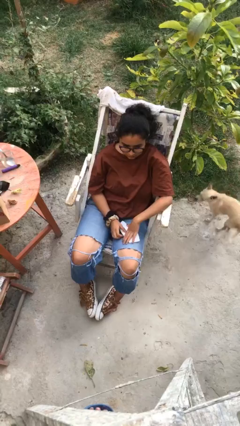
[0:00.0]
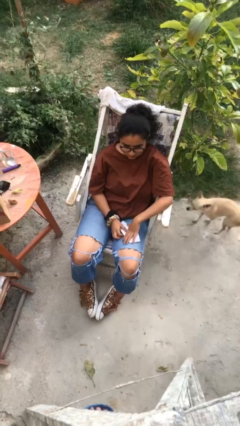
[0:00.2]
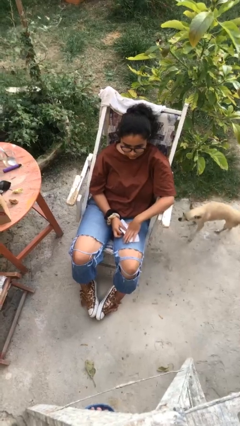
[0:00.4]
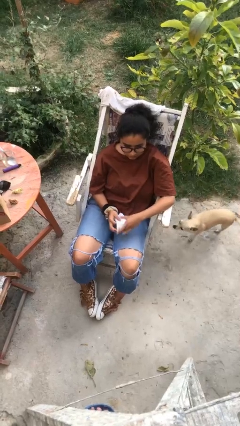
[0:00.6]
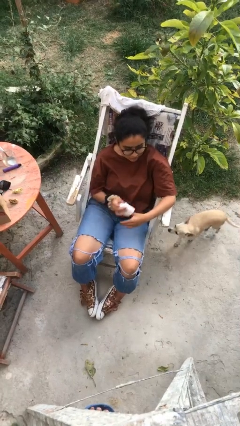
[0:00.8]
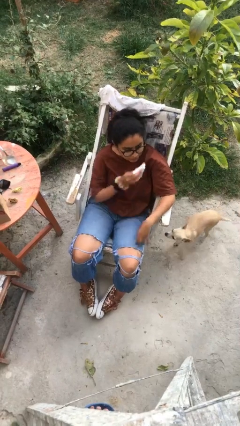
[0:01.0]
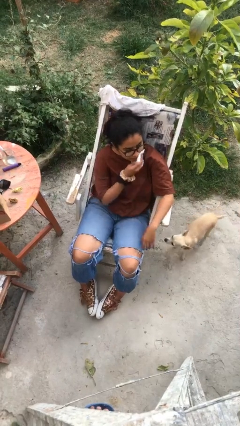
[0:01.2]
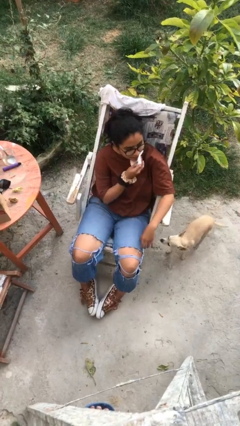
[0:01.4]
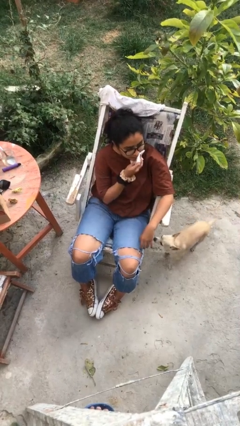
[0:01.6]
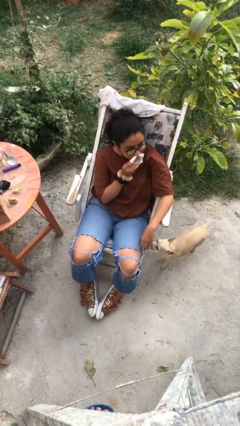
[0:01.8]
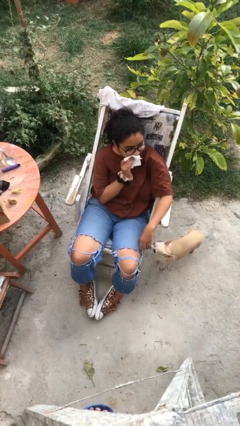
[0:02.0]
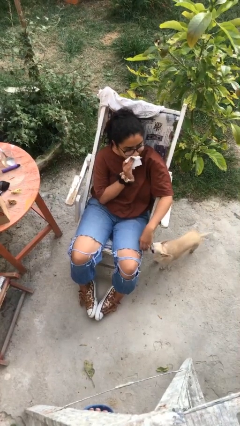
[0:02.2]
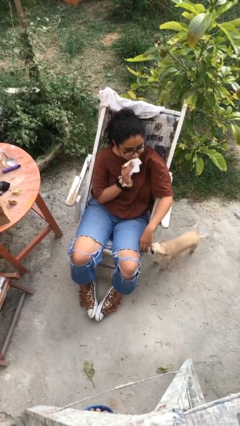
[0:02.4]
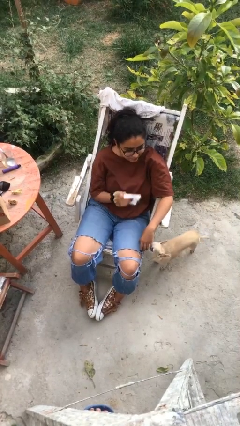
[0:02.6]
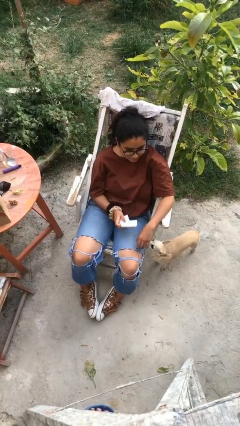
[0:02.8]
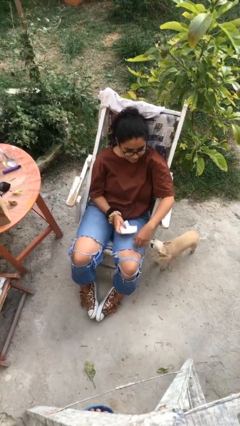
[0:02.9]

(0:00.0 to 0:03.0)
person wipes mouth with napkin

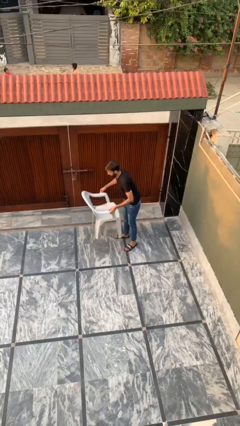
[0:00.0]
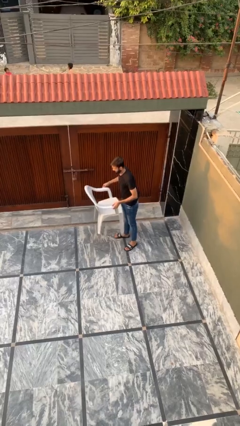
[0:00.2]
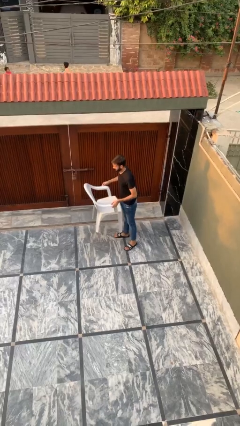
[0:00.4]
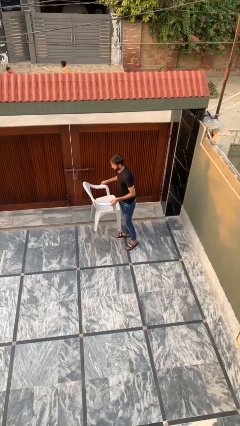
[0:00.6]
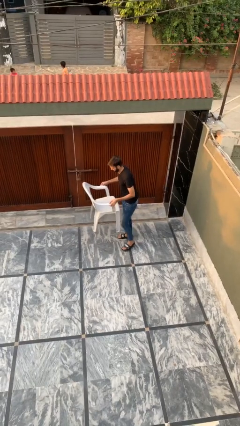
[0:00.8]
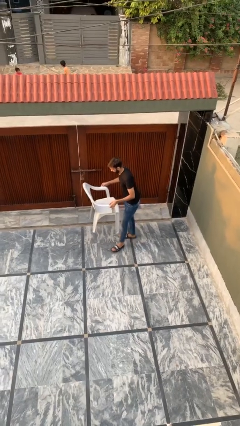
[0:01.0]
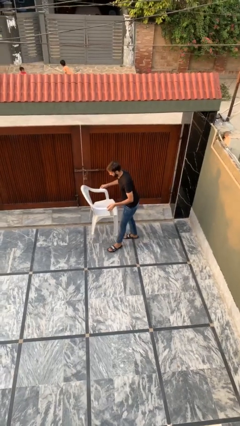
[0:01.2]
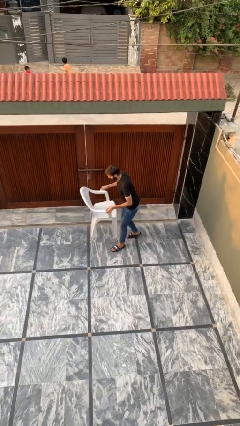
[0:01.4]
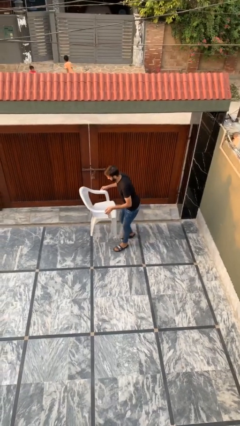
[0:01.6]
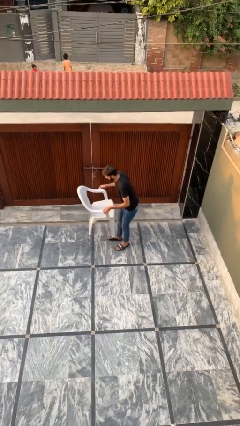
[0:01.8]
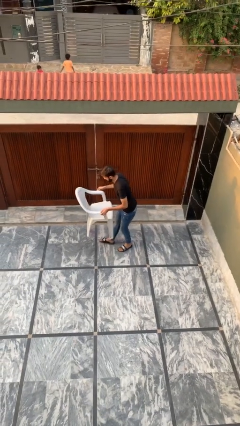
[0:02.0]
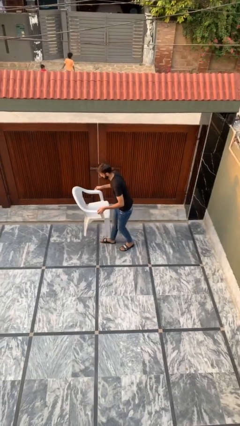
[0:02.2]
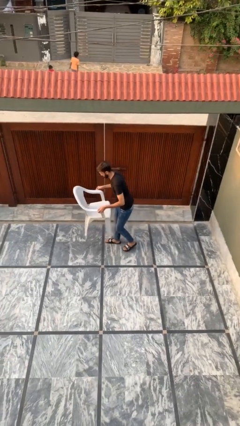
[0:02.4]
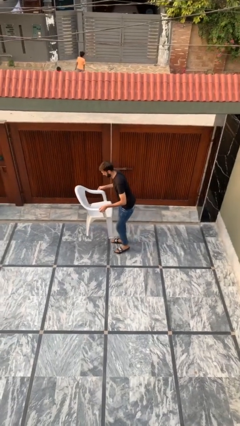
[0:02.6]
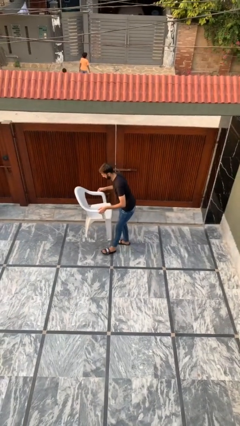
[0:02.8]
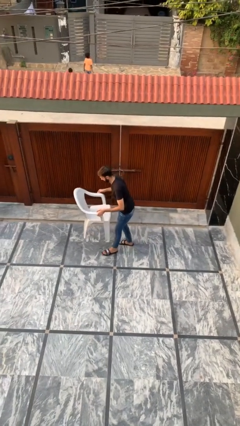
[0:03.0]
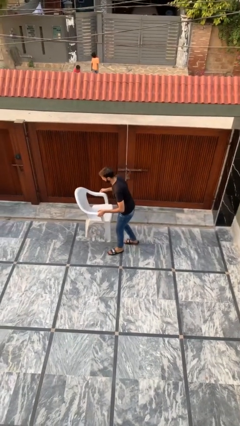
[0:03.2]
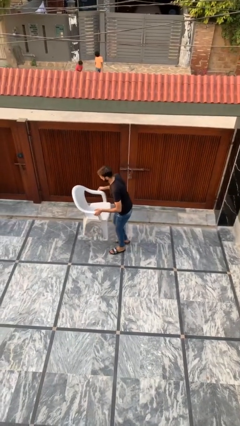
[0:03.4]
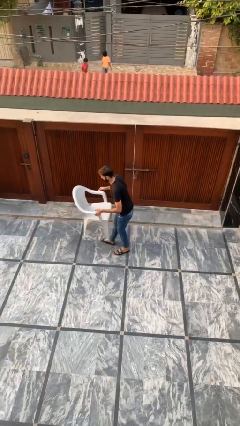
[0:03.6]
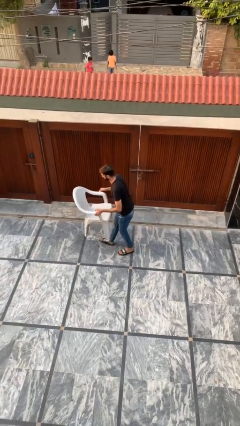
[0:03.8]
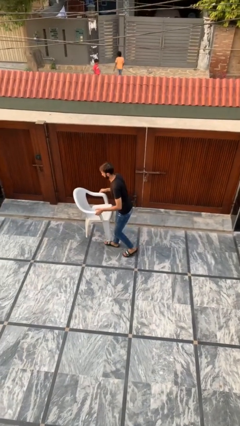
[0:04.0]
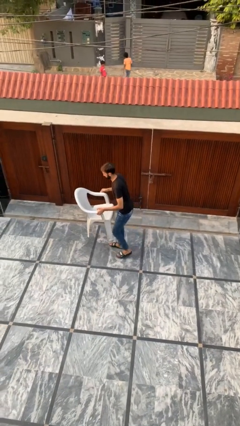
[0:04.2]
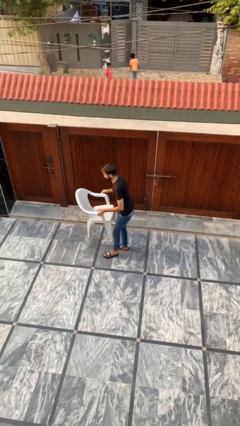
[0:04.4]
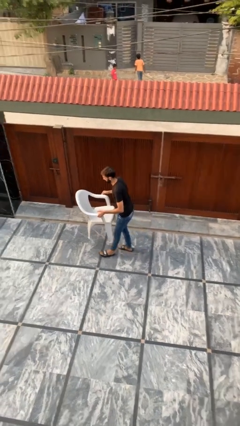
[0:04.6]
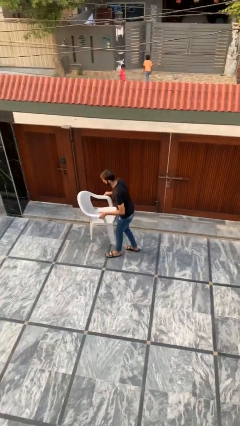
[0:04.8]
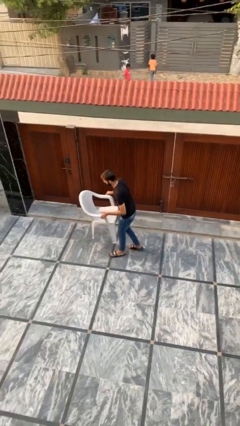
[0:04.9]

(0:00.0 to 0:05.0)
person carries heavy object

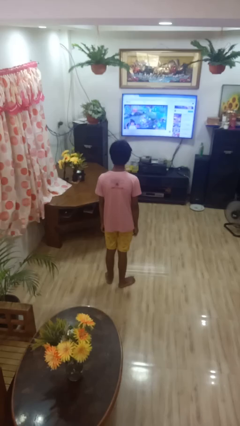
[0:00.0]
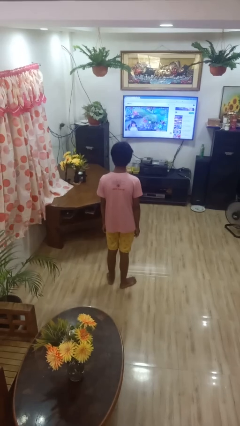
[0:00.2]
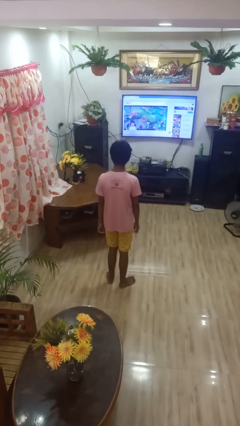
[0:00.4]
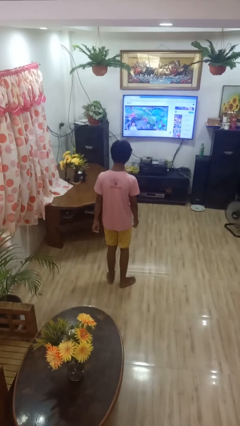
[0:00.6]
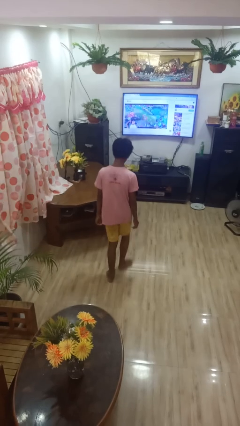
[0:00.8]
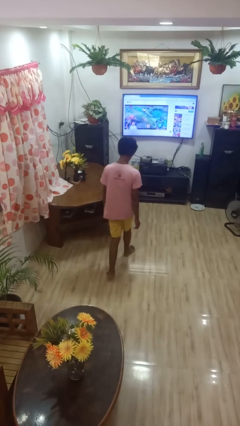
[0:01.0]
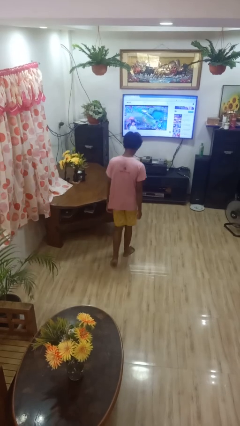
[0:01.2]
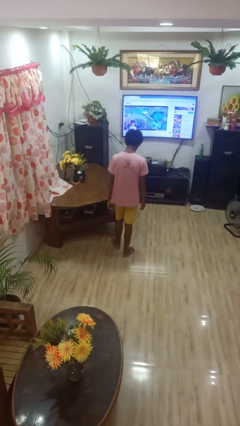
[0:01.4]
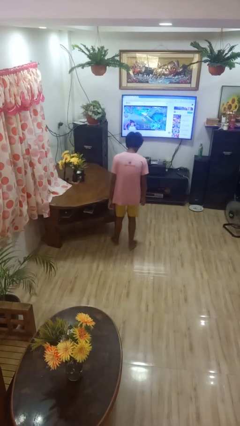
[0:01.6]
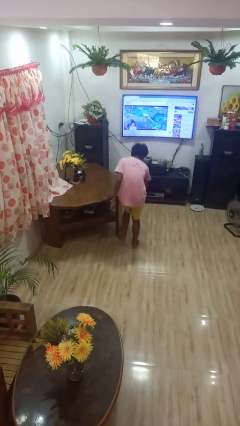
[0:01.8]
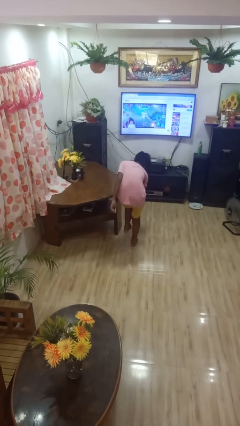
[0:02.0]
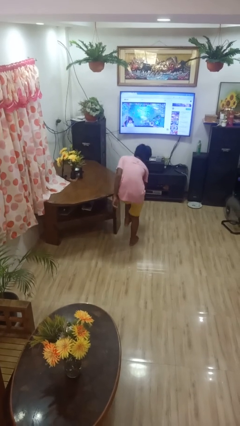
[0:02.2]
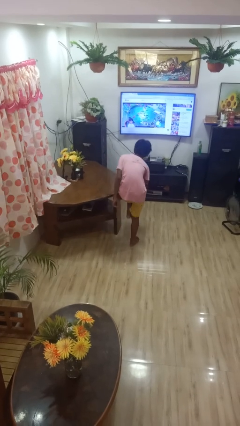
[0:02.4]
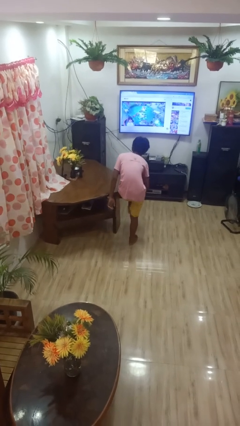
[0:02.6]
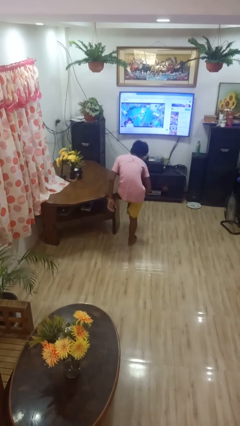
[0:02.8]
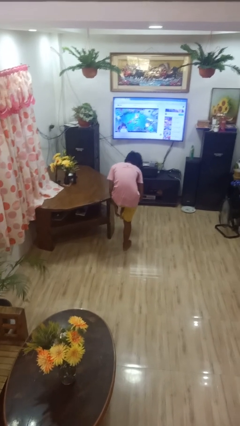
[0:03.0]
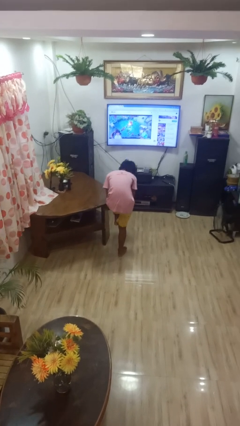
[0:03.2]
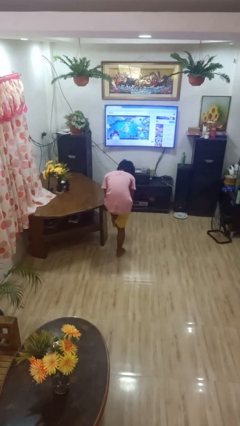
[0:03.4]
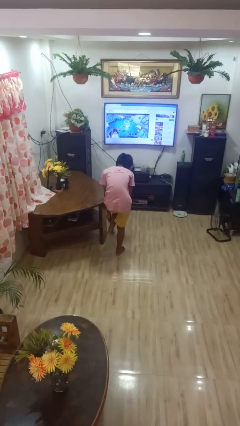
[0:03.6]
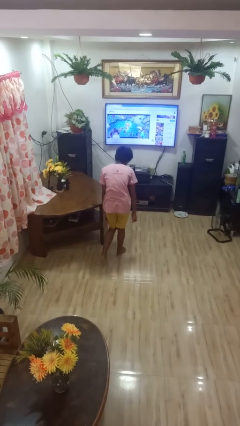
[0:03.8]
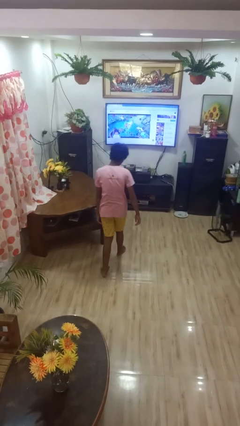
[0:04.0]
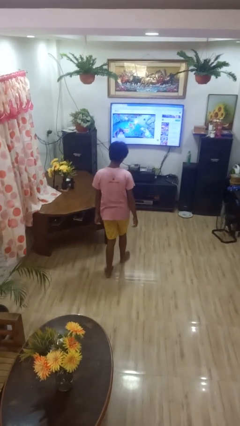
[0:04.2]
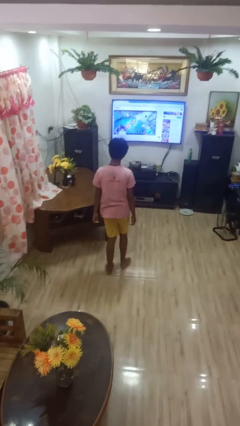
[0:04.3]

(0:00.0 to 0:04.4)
person stubs toe

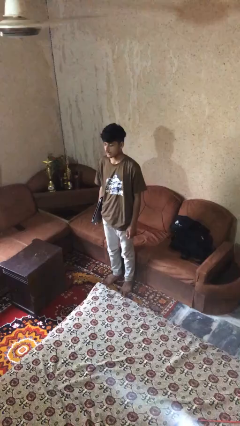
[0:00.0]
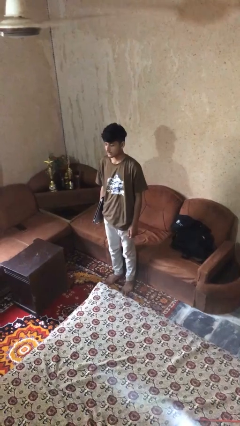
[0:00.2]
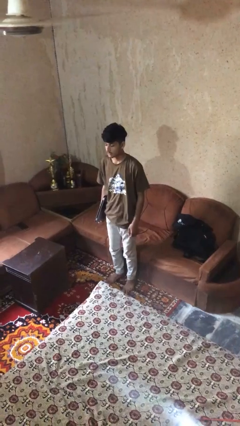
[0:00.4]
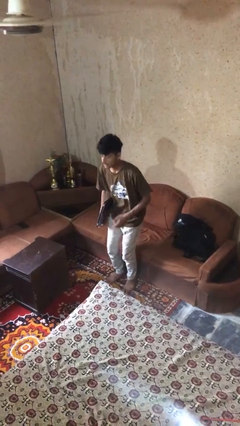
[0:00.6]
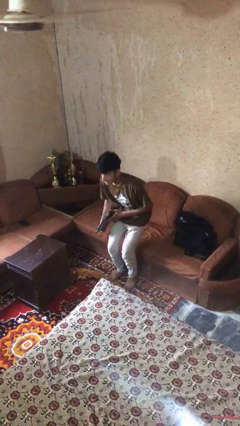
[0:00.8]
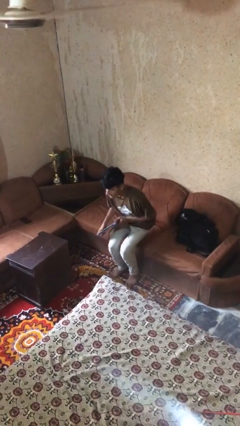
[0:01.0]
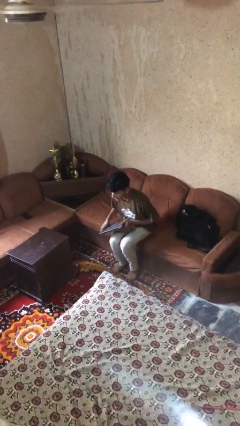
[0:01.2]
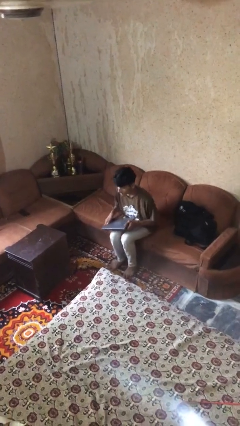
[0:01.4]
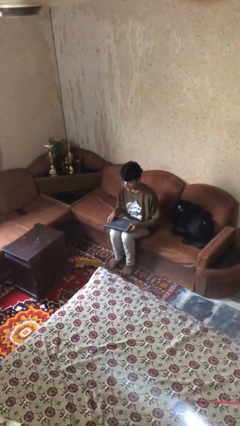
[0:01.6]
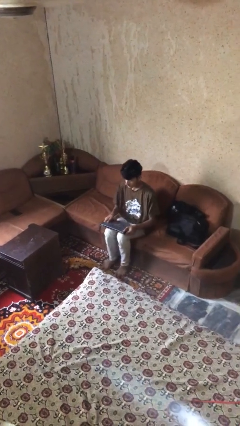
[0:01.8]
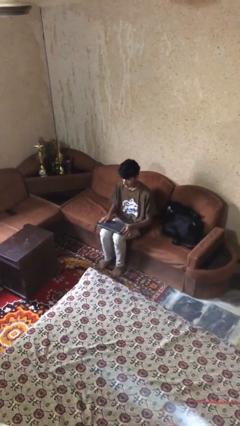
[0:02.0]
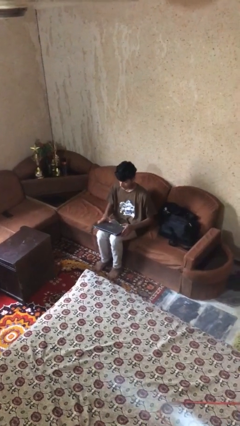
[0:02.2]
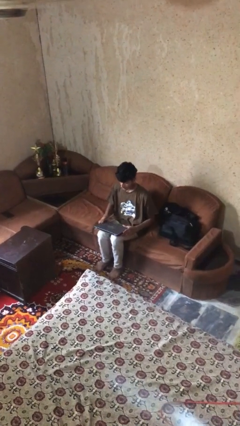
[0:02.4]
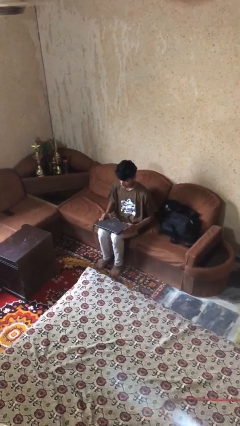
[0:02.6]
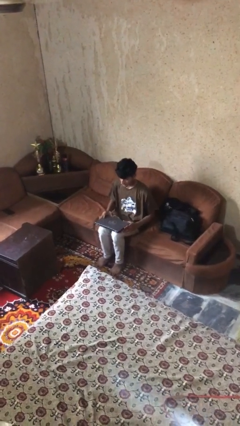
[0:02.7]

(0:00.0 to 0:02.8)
person sits down

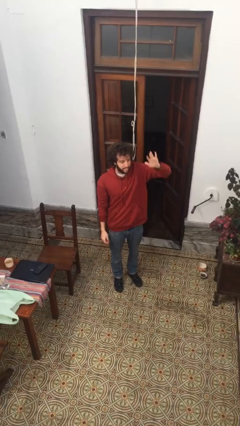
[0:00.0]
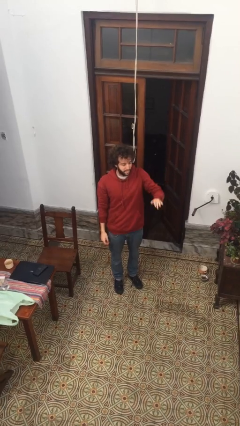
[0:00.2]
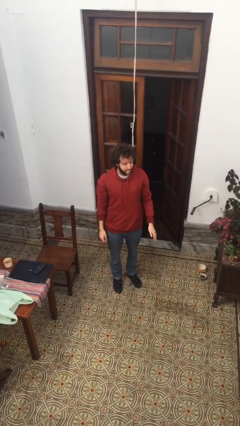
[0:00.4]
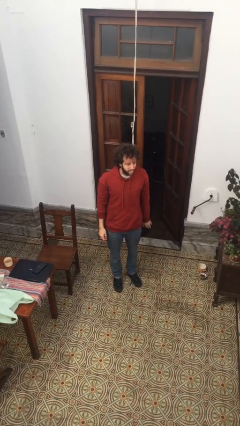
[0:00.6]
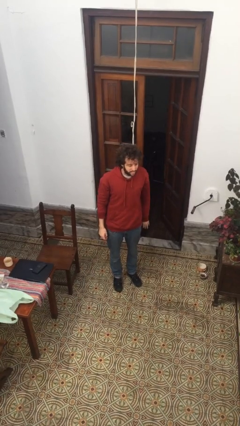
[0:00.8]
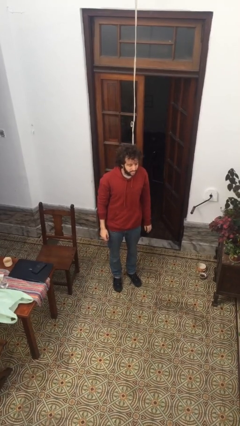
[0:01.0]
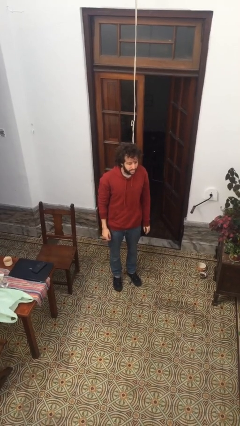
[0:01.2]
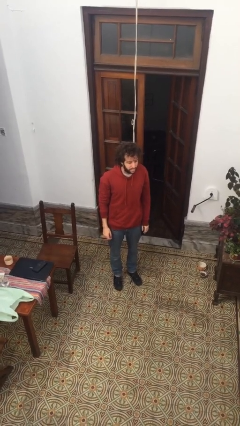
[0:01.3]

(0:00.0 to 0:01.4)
person gestures lower hand

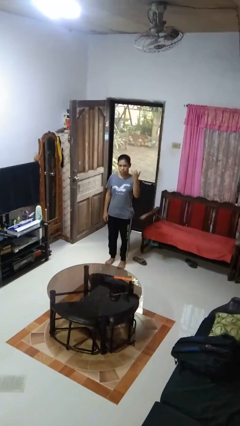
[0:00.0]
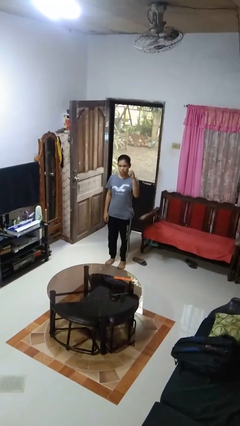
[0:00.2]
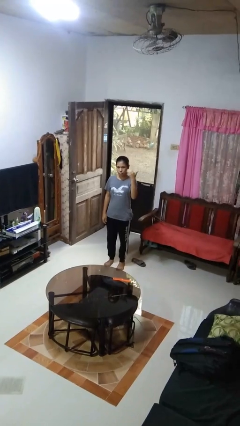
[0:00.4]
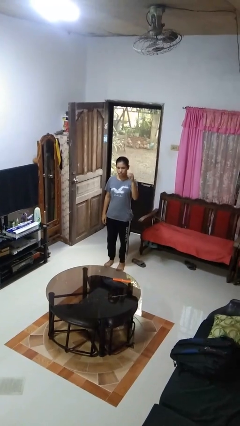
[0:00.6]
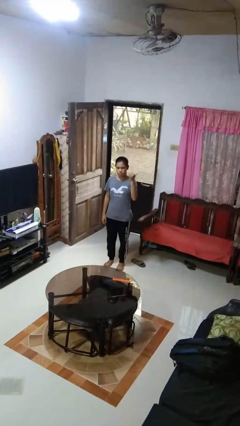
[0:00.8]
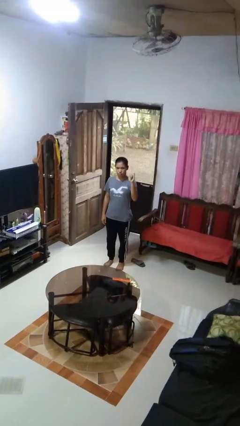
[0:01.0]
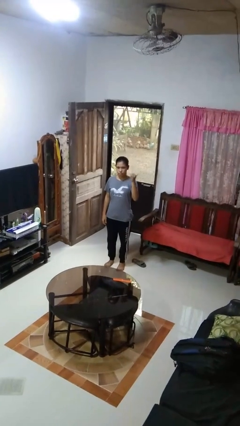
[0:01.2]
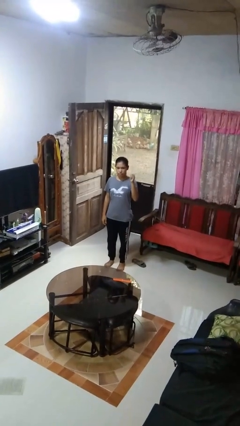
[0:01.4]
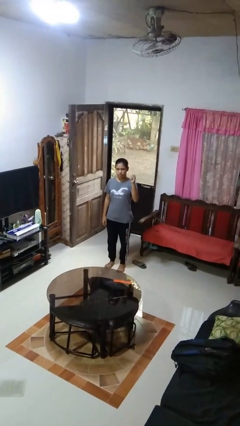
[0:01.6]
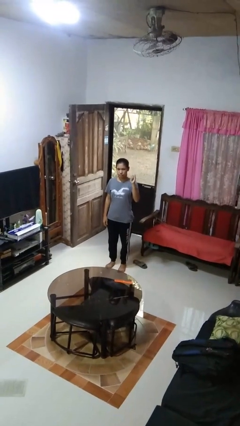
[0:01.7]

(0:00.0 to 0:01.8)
person gestures hang loose
